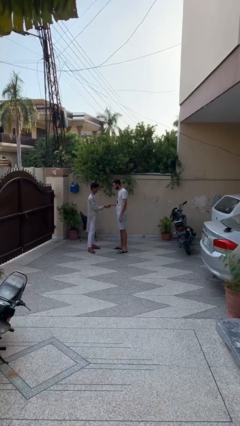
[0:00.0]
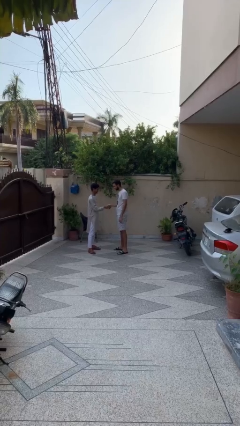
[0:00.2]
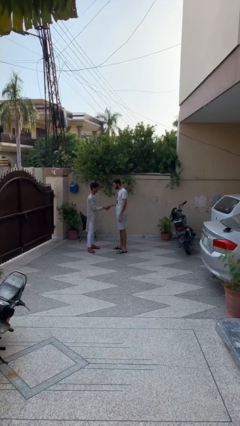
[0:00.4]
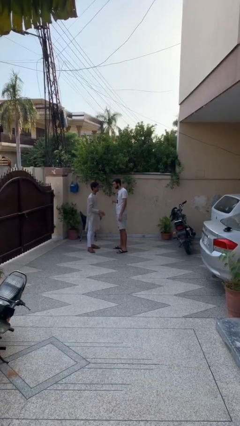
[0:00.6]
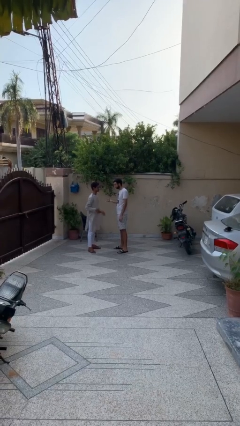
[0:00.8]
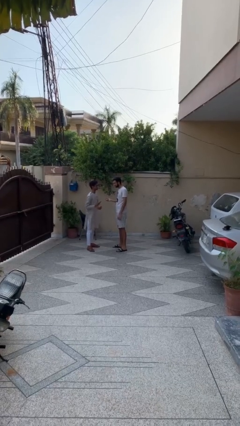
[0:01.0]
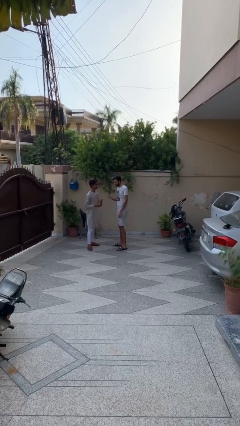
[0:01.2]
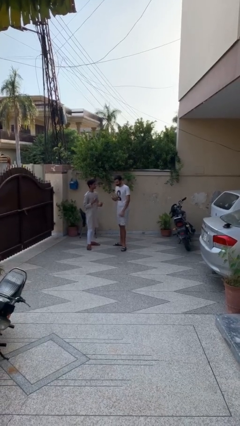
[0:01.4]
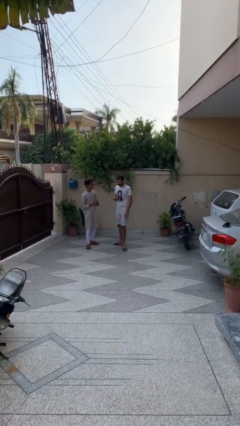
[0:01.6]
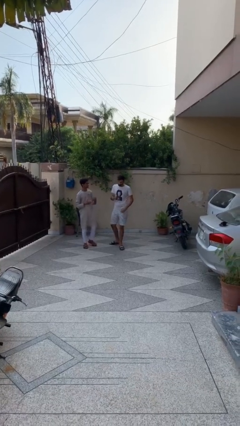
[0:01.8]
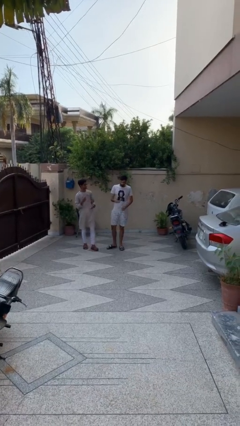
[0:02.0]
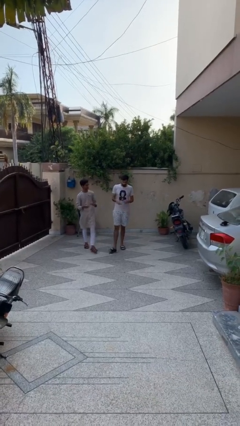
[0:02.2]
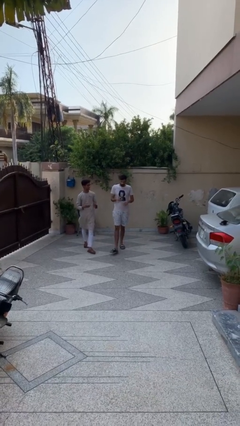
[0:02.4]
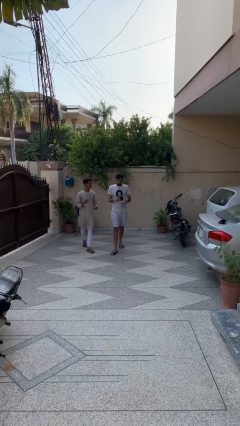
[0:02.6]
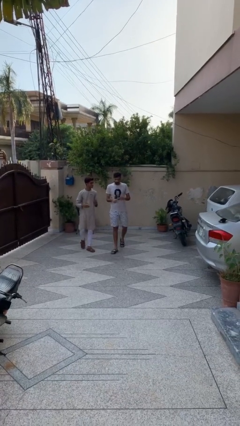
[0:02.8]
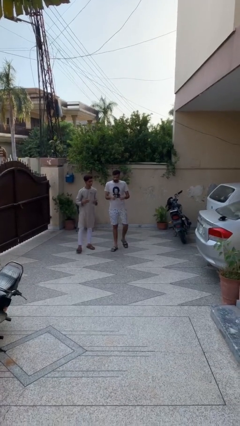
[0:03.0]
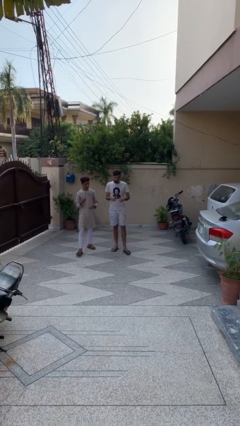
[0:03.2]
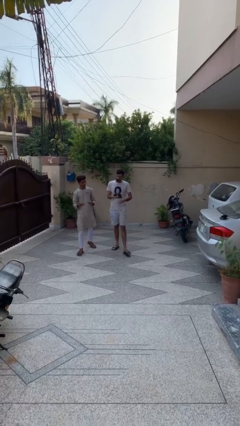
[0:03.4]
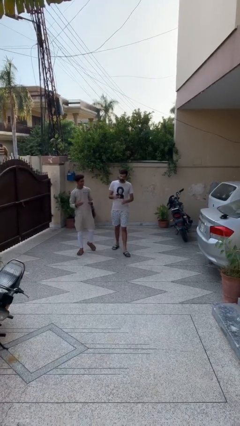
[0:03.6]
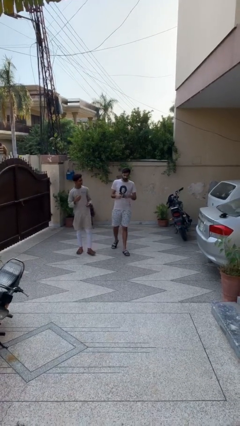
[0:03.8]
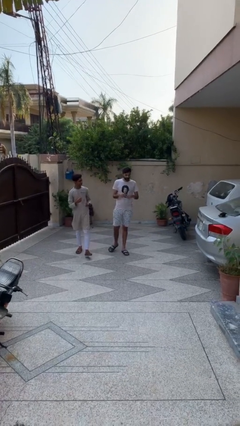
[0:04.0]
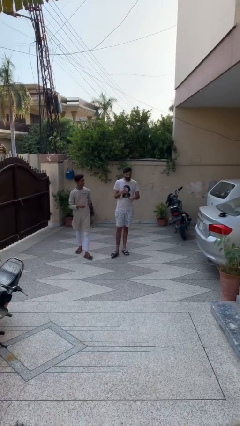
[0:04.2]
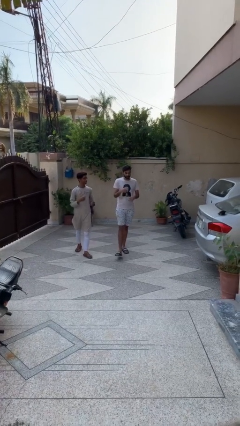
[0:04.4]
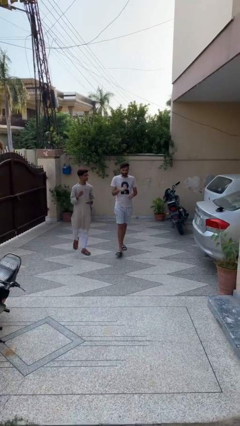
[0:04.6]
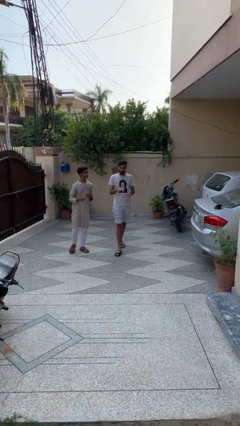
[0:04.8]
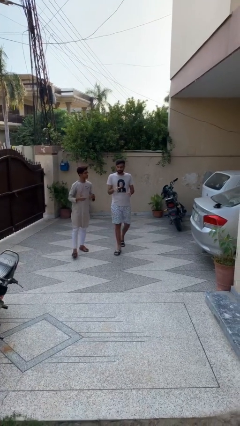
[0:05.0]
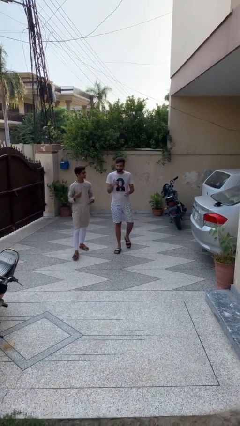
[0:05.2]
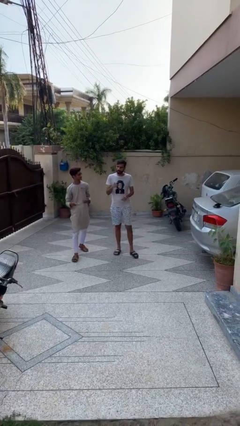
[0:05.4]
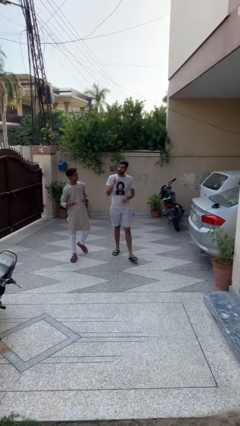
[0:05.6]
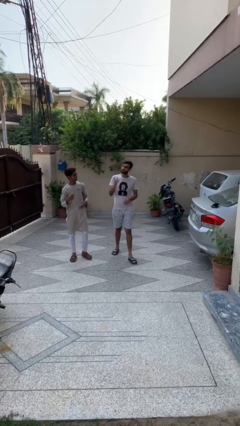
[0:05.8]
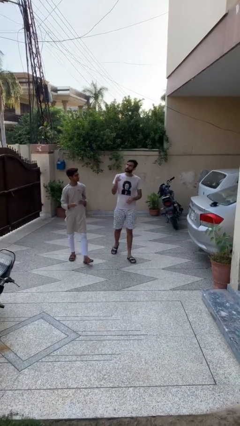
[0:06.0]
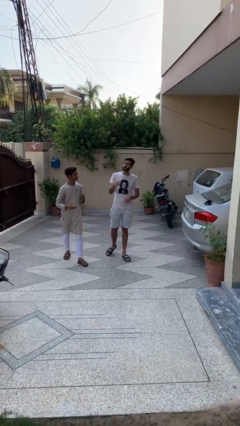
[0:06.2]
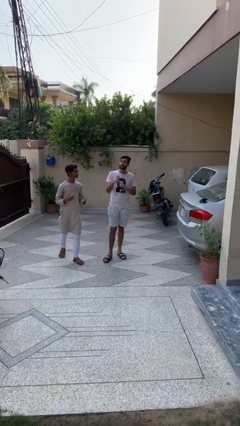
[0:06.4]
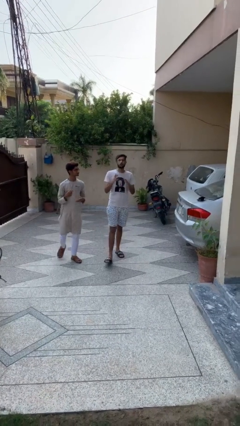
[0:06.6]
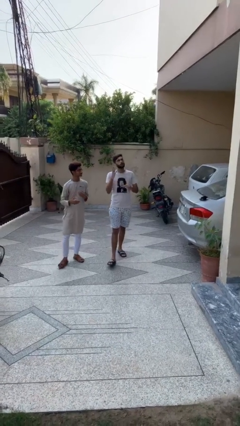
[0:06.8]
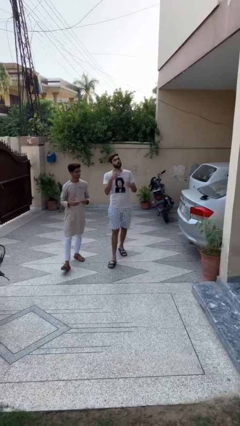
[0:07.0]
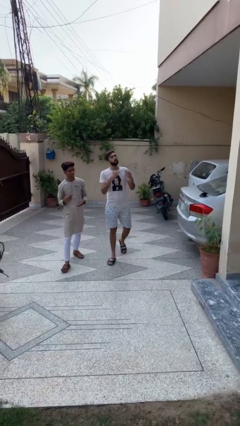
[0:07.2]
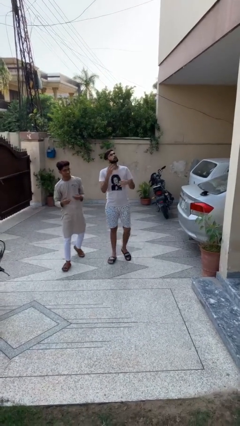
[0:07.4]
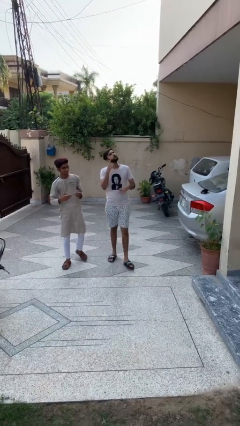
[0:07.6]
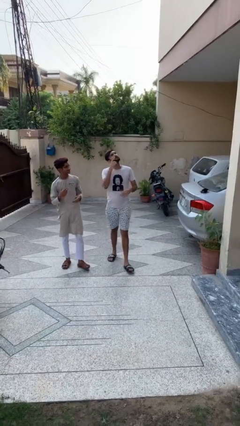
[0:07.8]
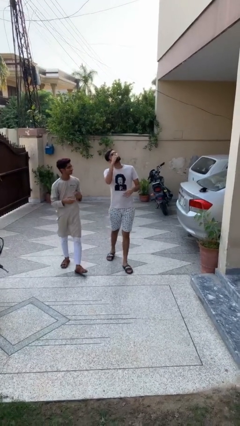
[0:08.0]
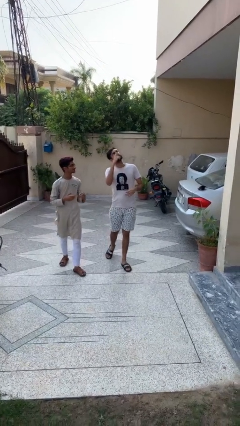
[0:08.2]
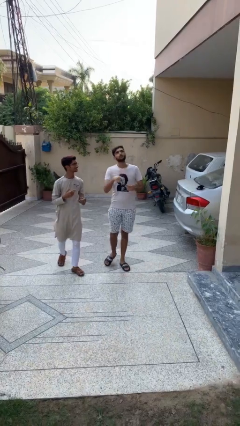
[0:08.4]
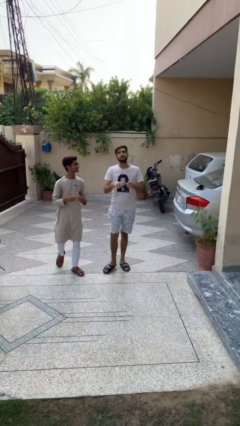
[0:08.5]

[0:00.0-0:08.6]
person talks to person

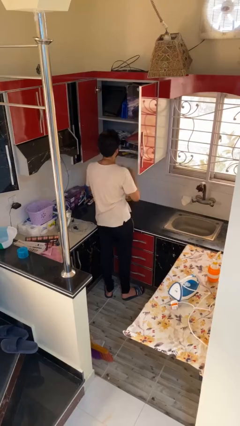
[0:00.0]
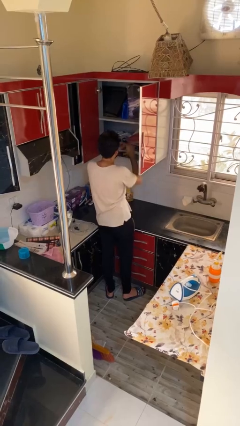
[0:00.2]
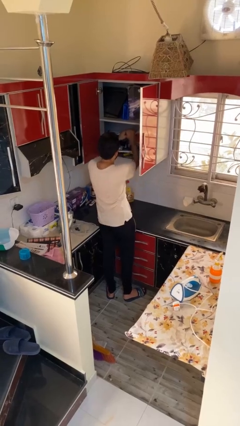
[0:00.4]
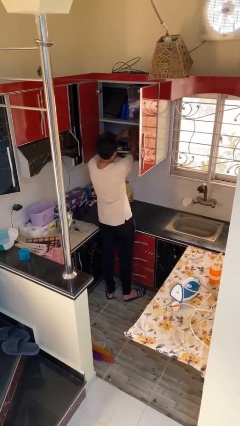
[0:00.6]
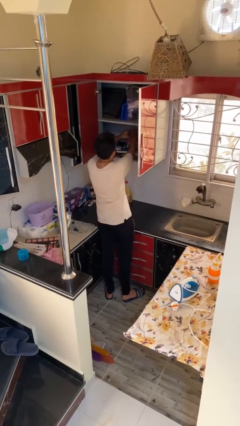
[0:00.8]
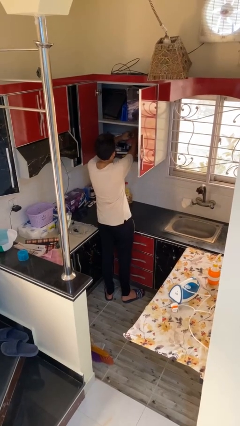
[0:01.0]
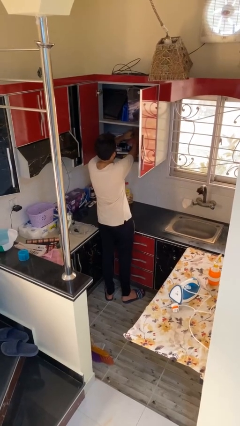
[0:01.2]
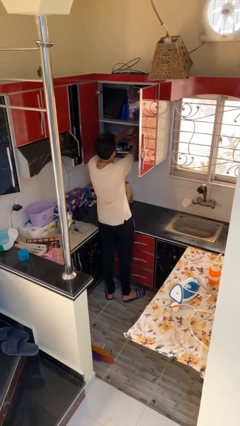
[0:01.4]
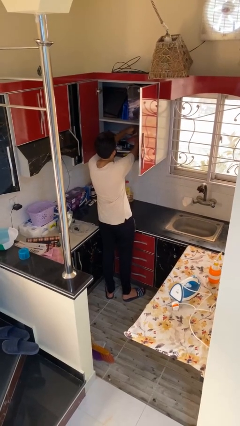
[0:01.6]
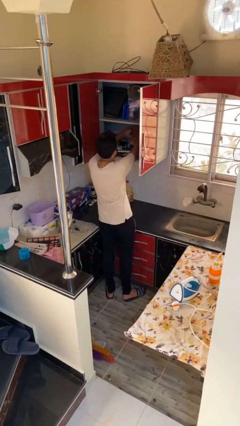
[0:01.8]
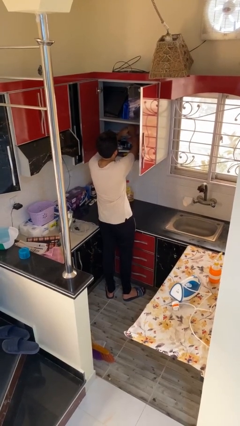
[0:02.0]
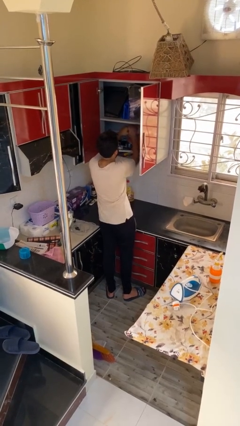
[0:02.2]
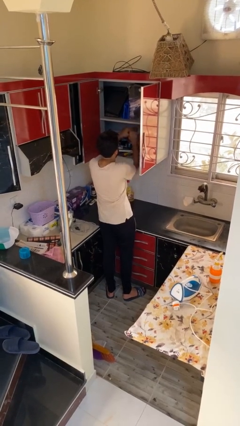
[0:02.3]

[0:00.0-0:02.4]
person searches in cabinet

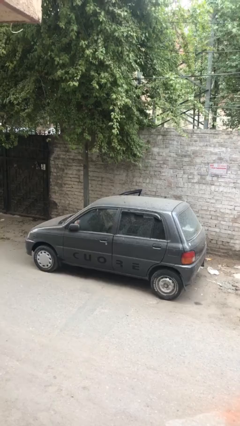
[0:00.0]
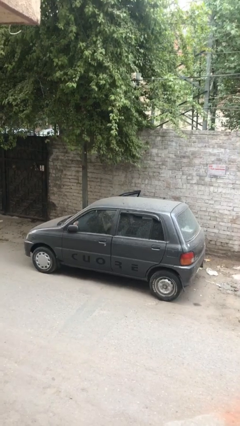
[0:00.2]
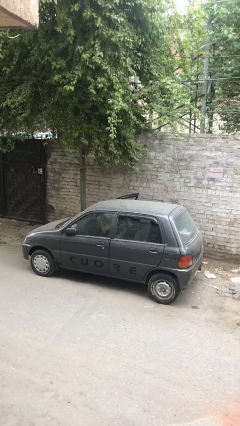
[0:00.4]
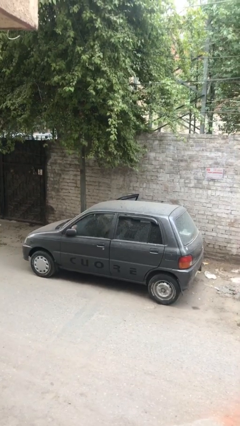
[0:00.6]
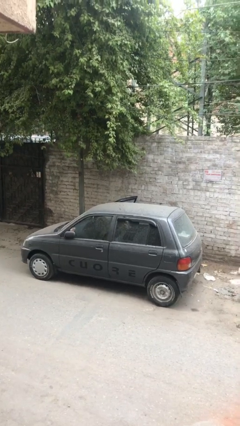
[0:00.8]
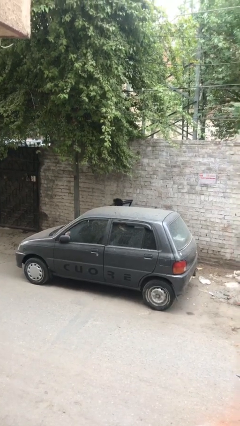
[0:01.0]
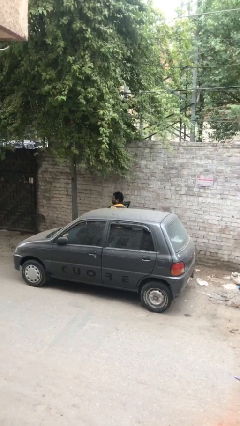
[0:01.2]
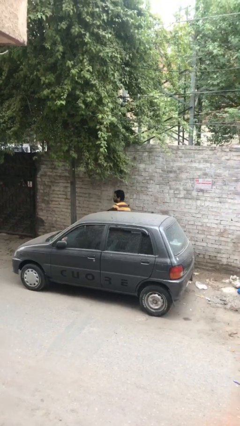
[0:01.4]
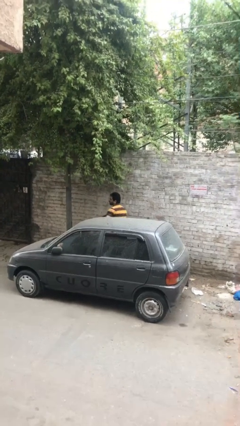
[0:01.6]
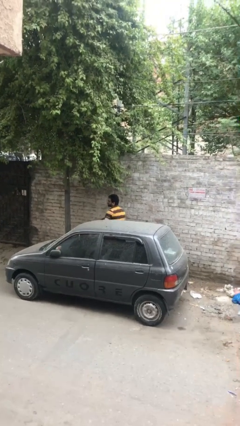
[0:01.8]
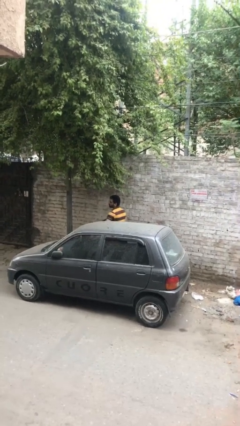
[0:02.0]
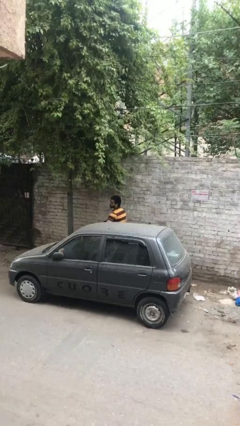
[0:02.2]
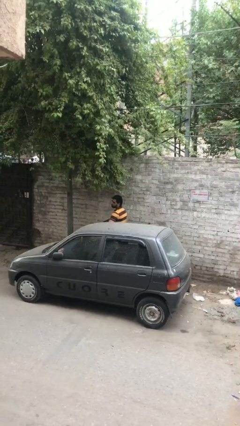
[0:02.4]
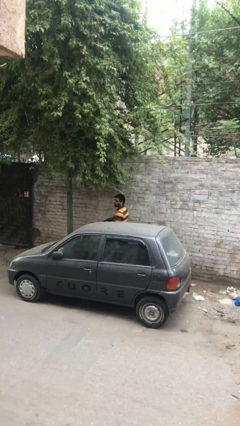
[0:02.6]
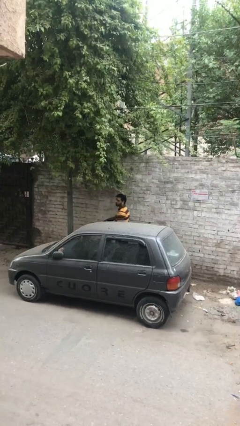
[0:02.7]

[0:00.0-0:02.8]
person exits car

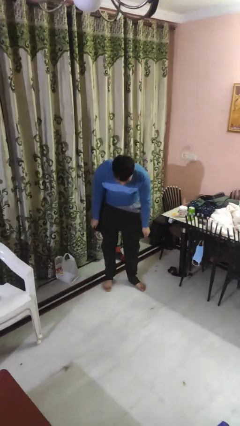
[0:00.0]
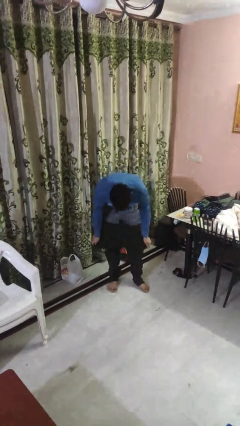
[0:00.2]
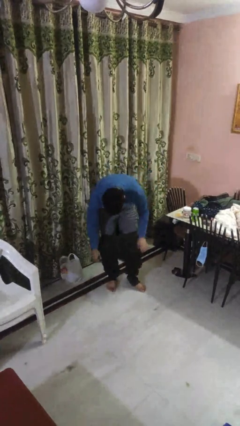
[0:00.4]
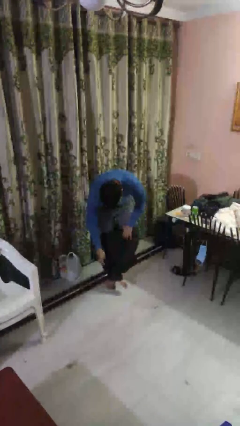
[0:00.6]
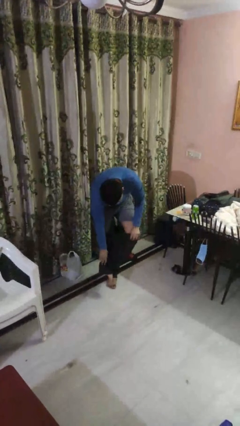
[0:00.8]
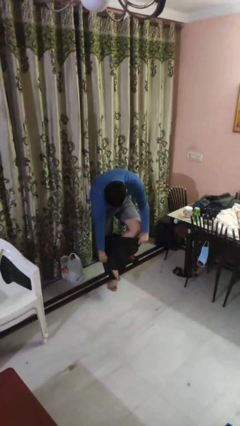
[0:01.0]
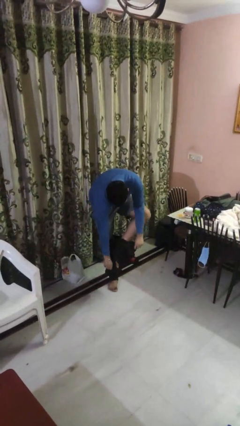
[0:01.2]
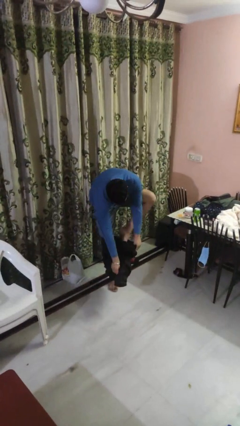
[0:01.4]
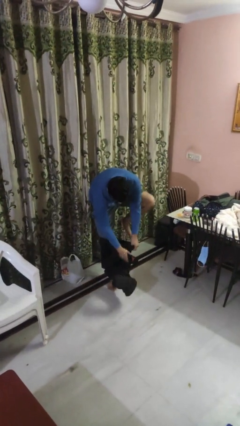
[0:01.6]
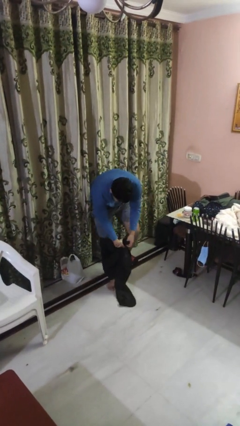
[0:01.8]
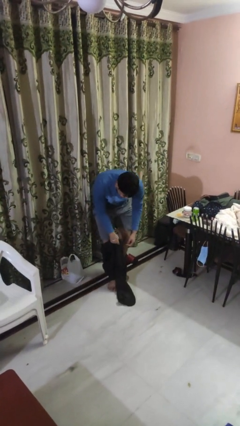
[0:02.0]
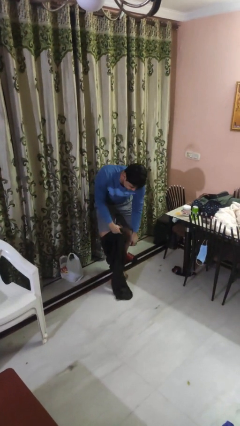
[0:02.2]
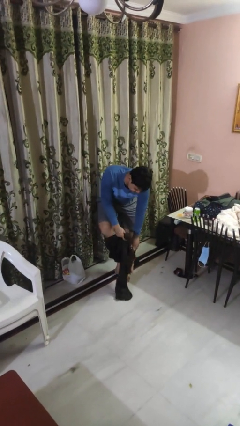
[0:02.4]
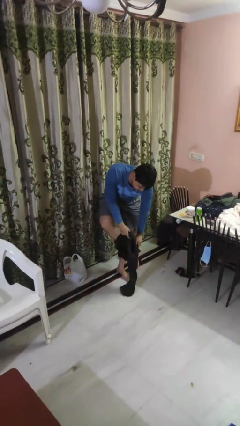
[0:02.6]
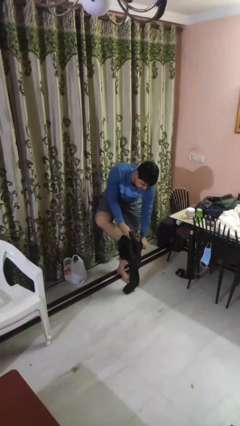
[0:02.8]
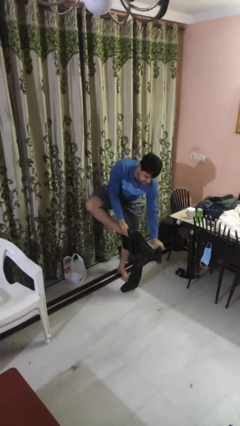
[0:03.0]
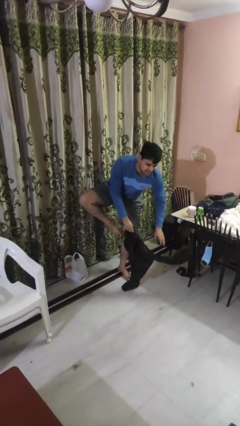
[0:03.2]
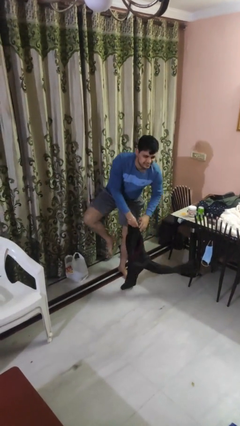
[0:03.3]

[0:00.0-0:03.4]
person takes off pants

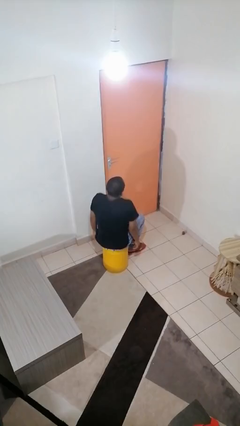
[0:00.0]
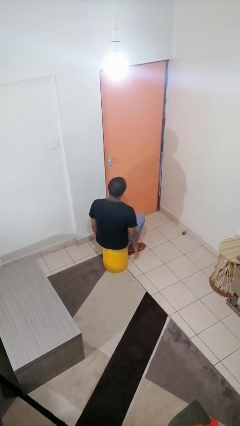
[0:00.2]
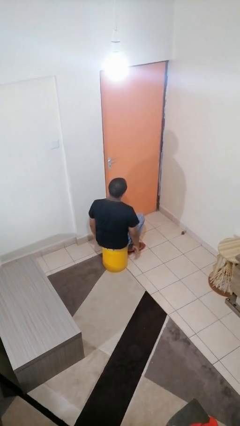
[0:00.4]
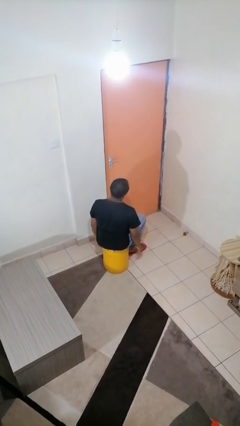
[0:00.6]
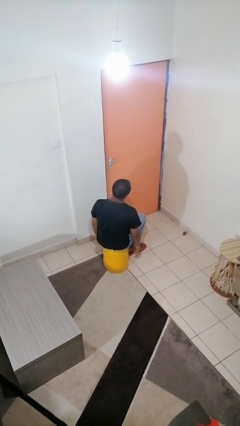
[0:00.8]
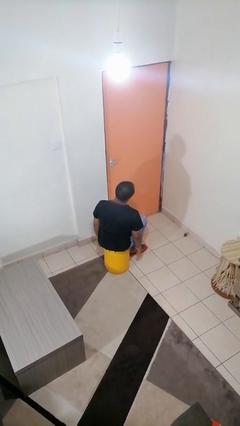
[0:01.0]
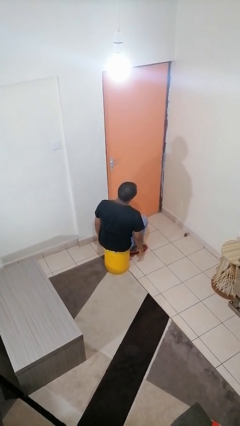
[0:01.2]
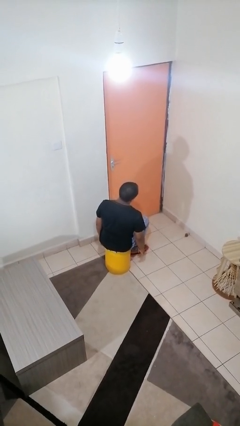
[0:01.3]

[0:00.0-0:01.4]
person shrugs
